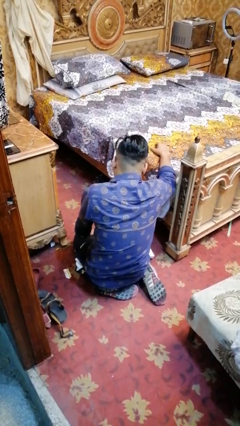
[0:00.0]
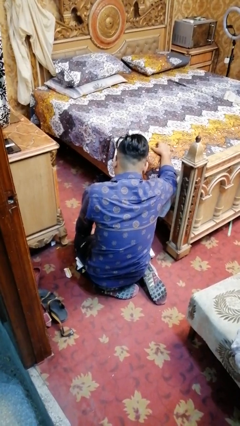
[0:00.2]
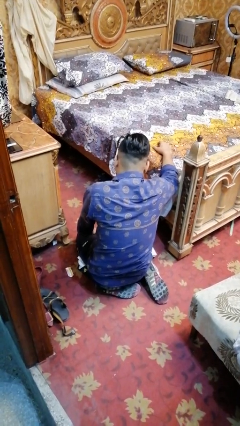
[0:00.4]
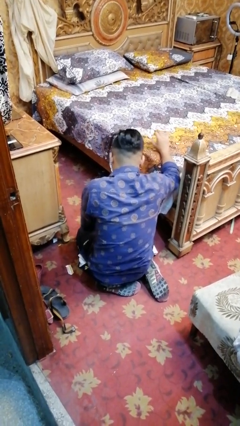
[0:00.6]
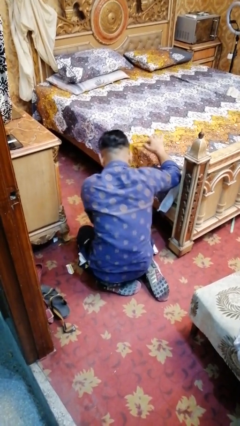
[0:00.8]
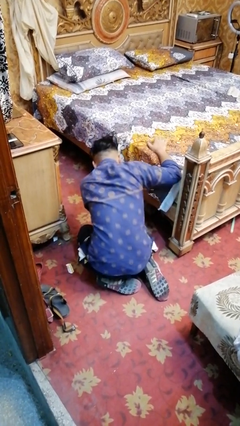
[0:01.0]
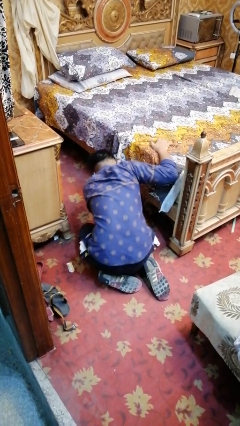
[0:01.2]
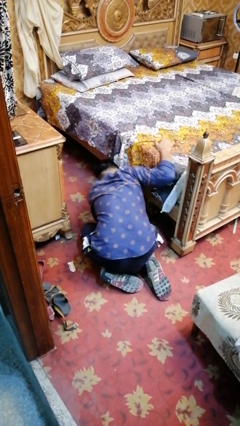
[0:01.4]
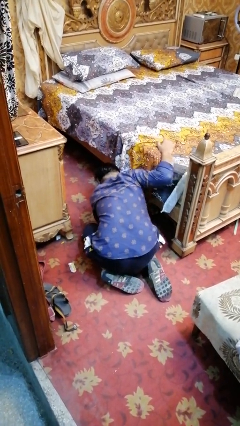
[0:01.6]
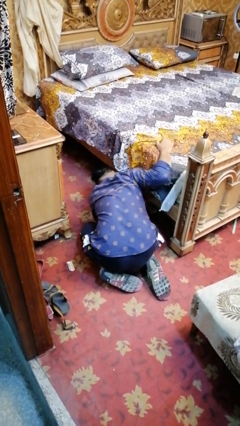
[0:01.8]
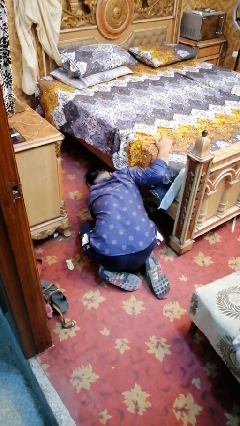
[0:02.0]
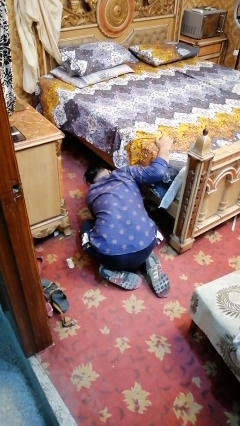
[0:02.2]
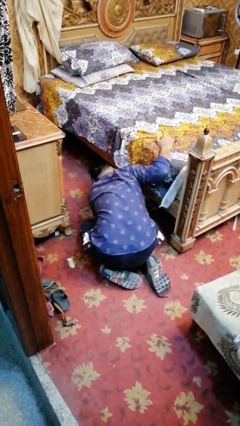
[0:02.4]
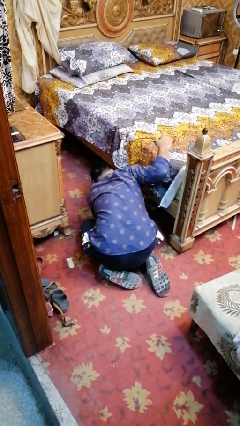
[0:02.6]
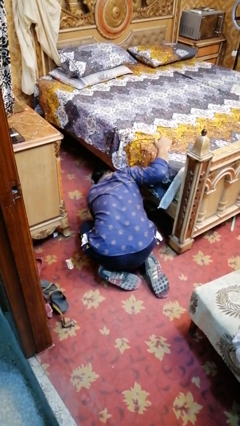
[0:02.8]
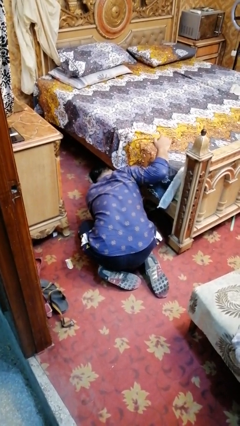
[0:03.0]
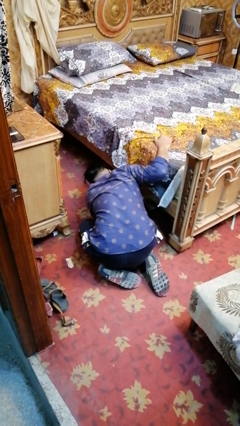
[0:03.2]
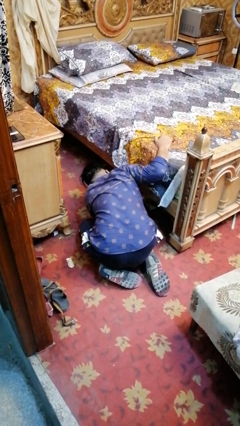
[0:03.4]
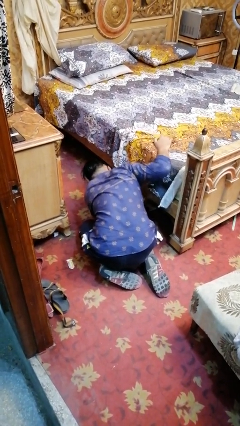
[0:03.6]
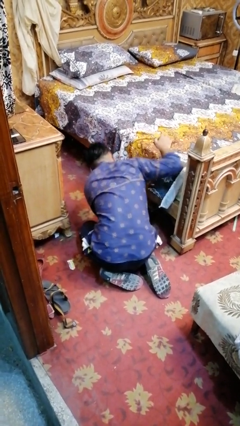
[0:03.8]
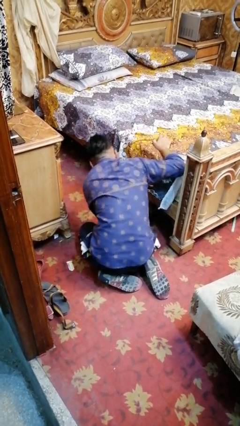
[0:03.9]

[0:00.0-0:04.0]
person searches under bed

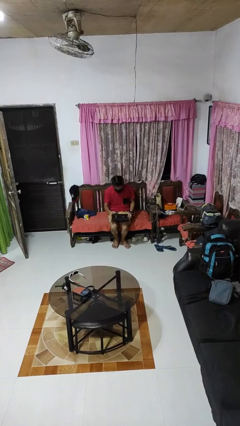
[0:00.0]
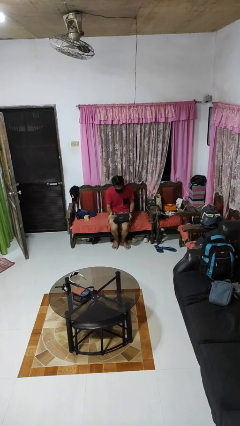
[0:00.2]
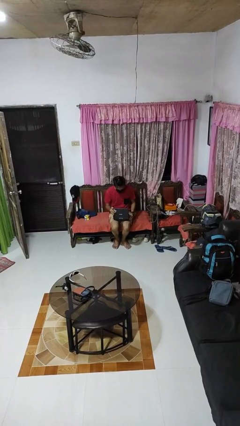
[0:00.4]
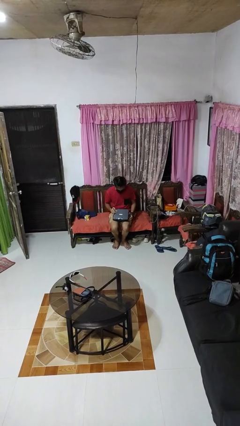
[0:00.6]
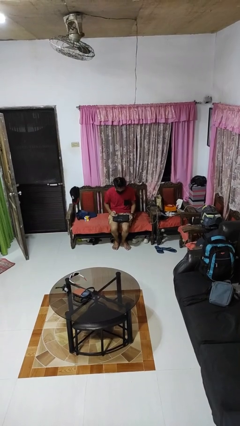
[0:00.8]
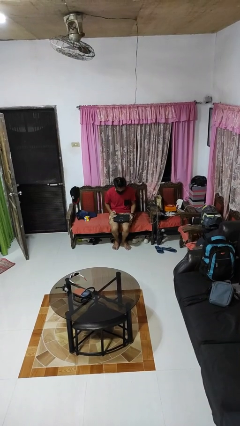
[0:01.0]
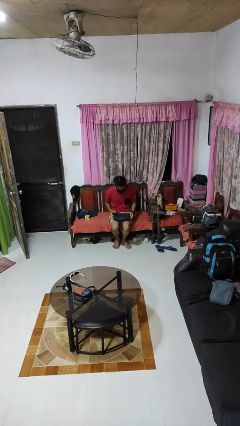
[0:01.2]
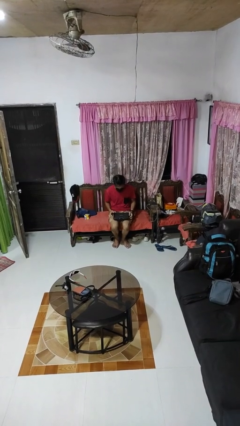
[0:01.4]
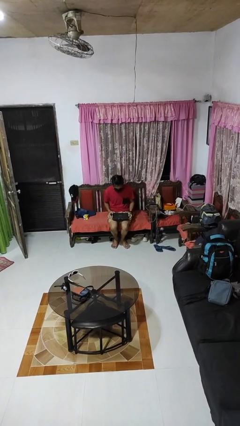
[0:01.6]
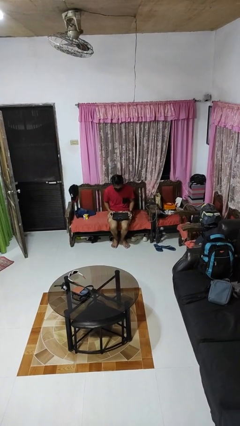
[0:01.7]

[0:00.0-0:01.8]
person closes laptop

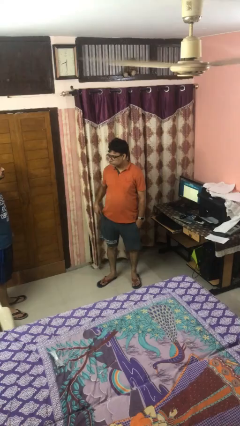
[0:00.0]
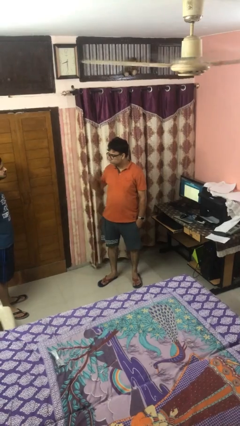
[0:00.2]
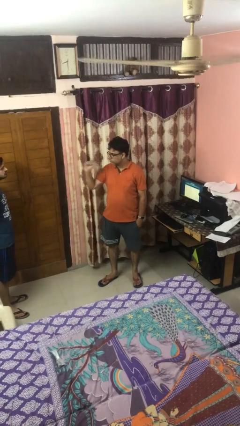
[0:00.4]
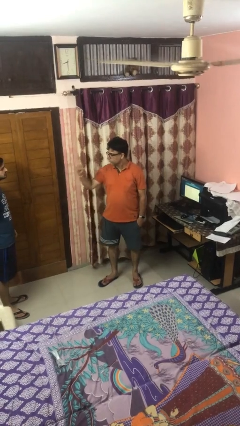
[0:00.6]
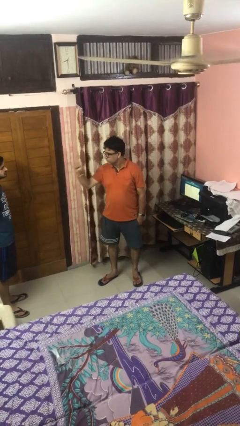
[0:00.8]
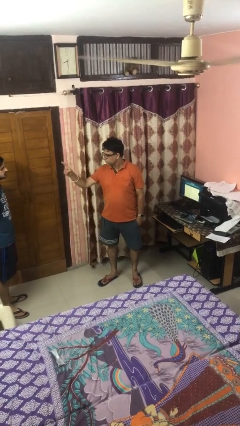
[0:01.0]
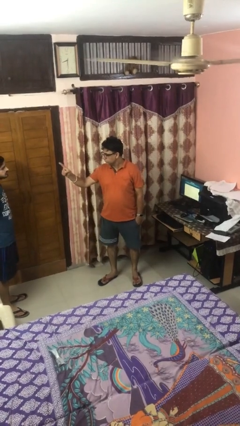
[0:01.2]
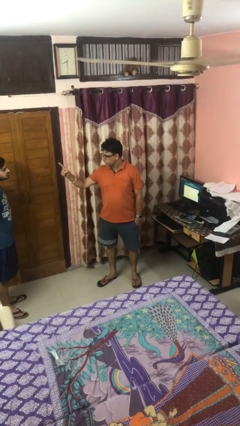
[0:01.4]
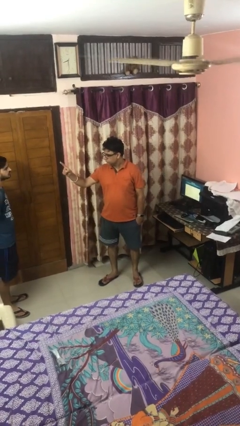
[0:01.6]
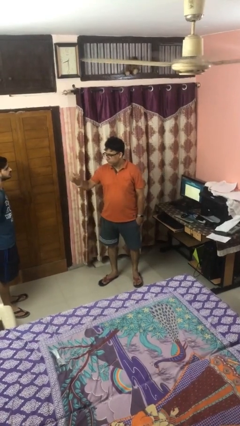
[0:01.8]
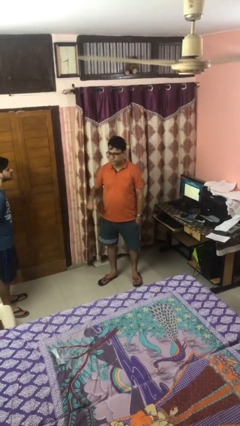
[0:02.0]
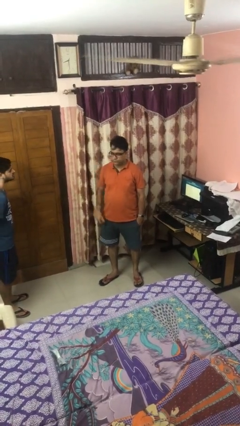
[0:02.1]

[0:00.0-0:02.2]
person points at person

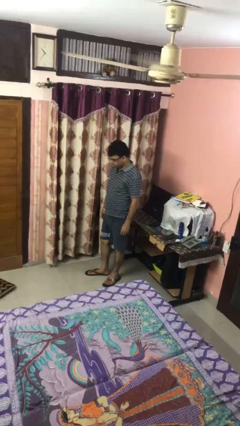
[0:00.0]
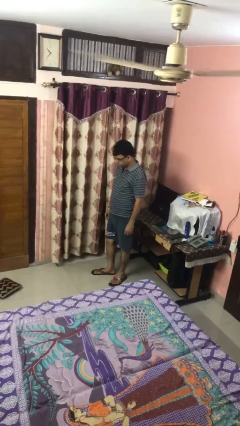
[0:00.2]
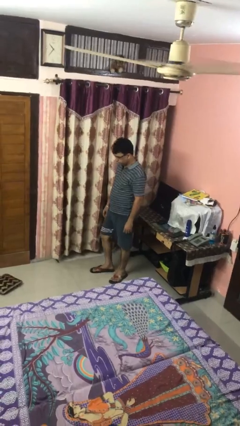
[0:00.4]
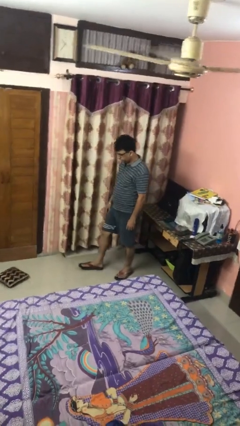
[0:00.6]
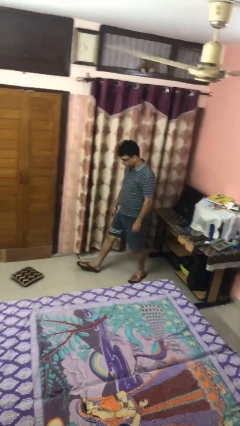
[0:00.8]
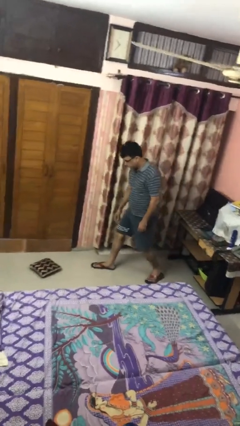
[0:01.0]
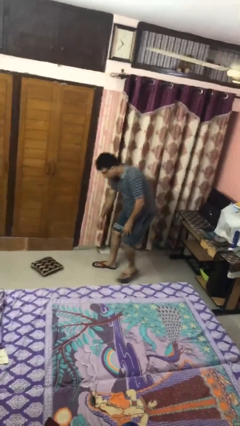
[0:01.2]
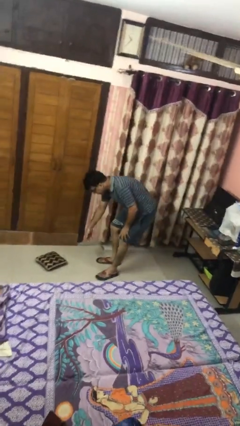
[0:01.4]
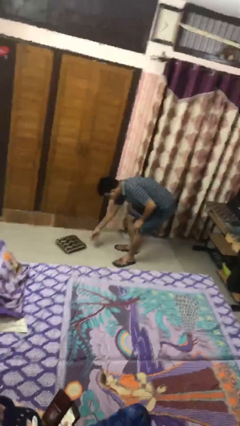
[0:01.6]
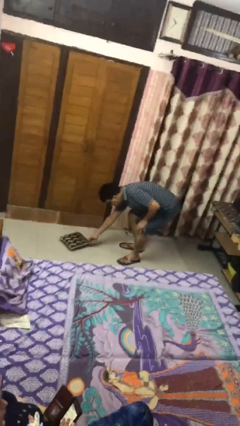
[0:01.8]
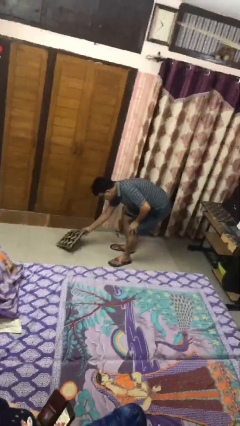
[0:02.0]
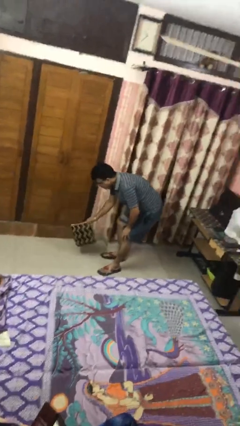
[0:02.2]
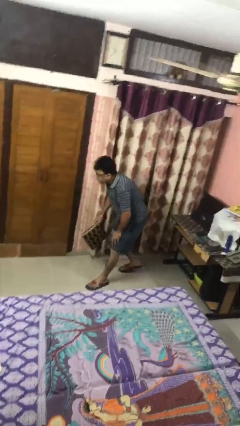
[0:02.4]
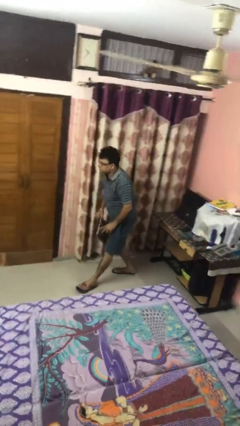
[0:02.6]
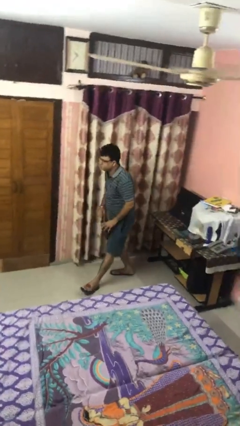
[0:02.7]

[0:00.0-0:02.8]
person picks up object from floor

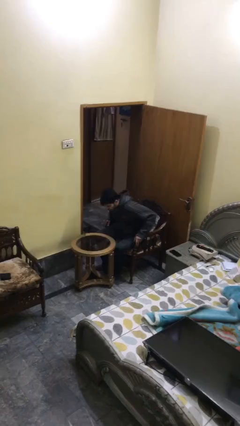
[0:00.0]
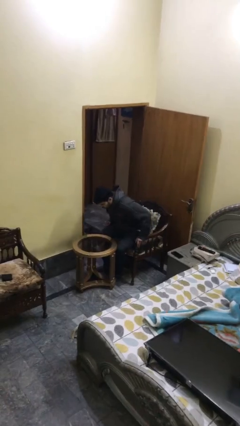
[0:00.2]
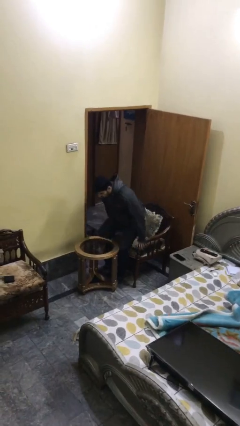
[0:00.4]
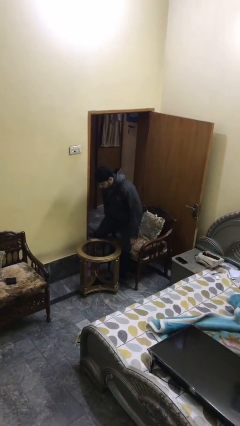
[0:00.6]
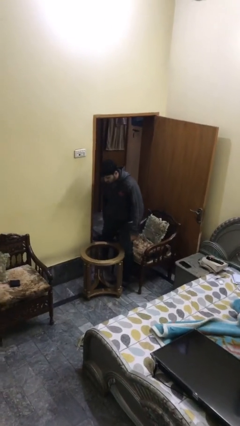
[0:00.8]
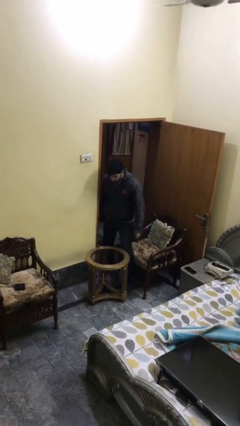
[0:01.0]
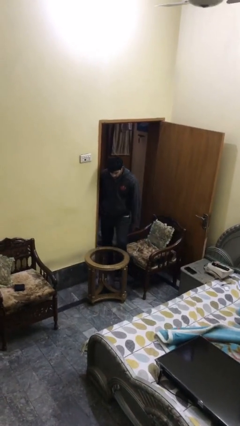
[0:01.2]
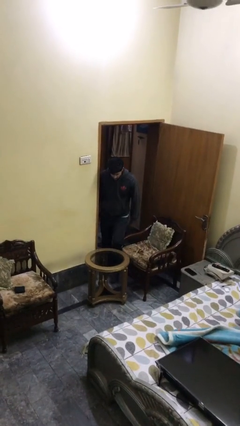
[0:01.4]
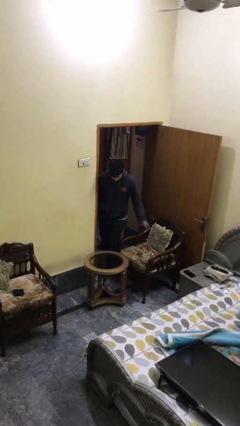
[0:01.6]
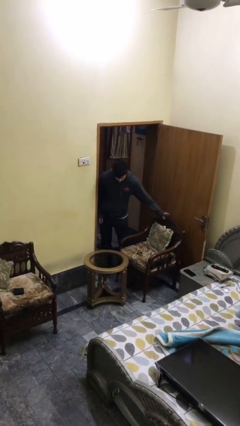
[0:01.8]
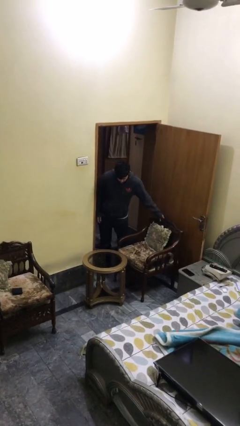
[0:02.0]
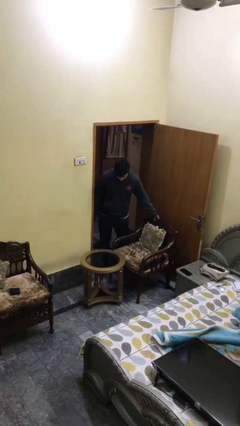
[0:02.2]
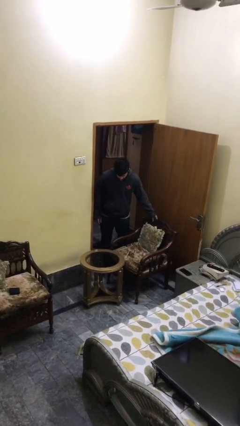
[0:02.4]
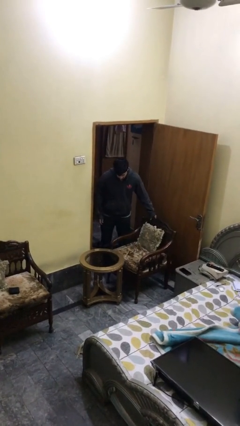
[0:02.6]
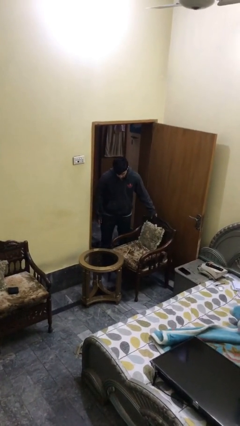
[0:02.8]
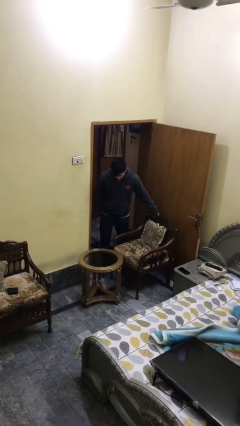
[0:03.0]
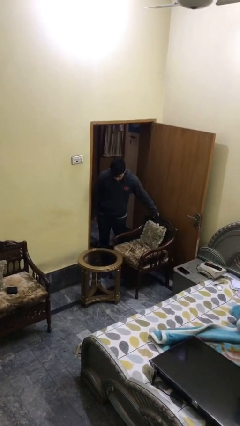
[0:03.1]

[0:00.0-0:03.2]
person stands up

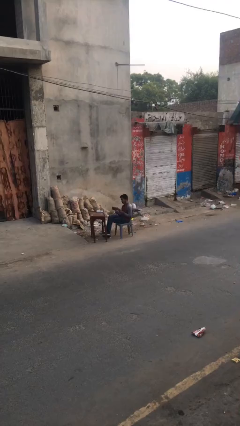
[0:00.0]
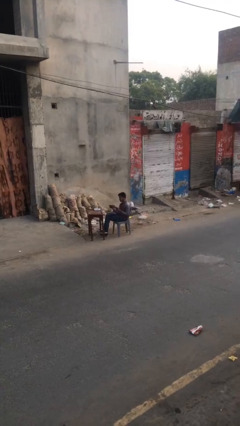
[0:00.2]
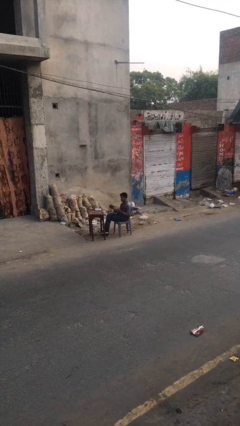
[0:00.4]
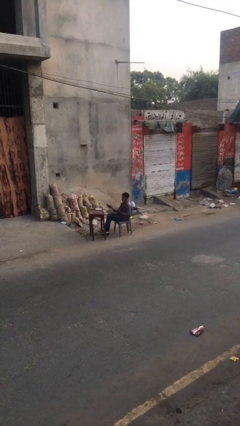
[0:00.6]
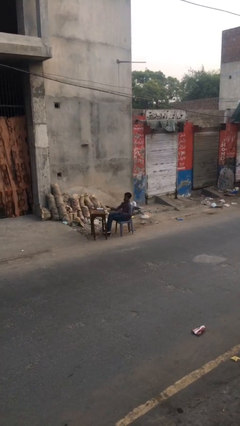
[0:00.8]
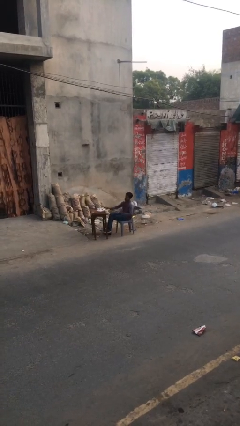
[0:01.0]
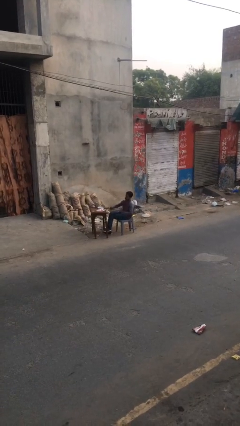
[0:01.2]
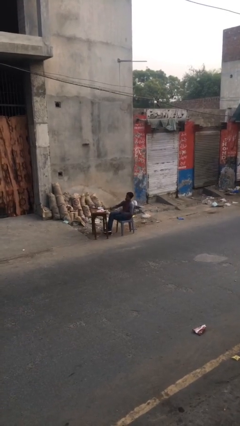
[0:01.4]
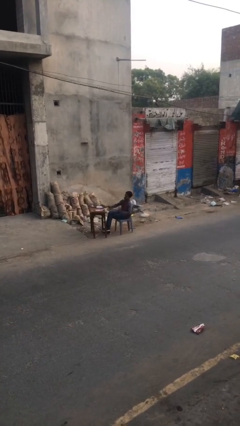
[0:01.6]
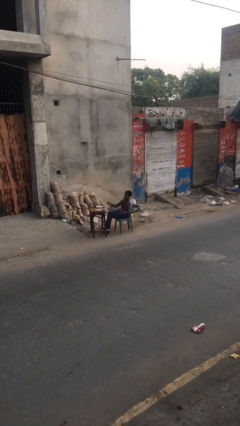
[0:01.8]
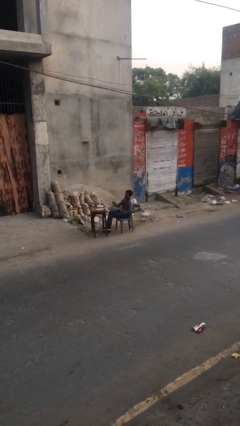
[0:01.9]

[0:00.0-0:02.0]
person puts down object on table

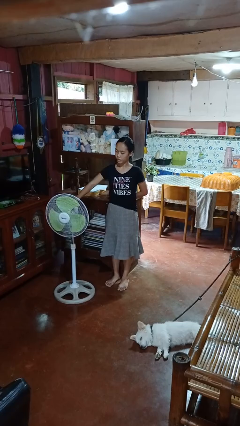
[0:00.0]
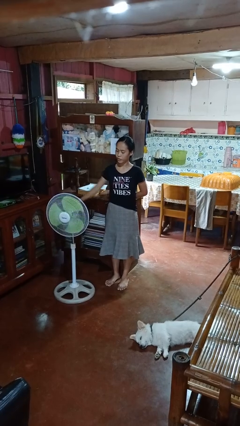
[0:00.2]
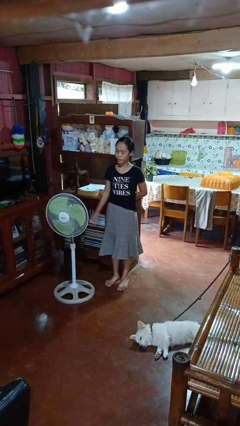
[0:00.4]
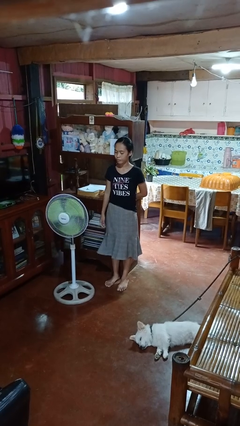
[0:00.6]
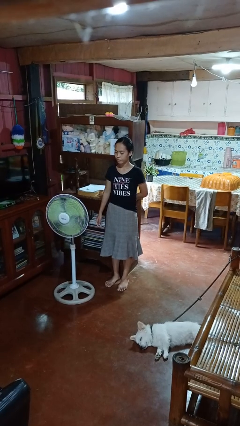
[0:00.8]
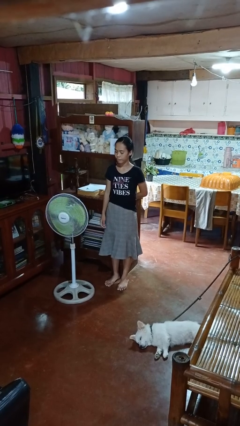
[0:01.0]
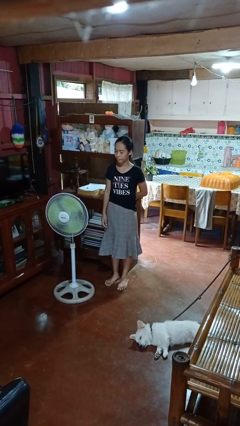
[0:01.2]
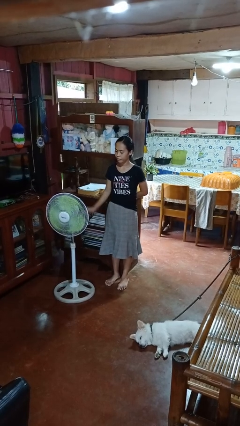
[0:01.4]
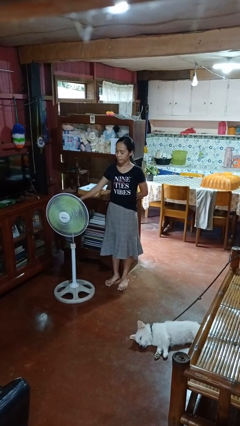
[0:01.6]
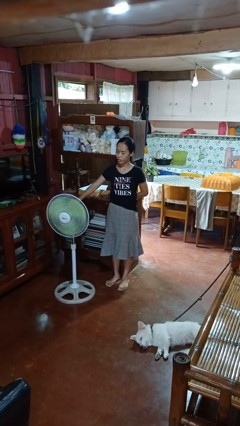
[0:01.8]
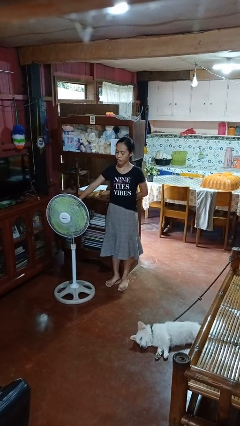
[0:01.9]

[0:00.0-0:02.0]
person turns on fan
